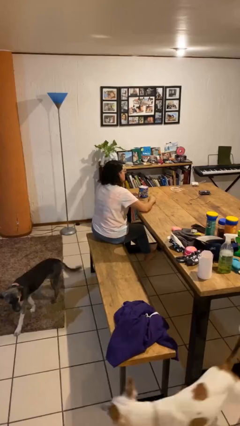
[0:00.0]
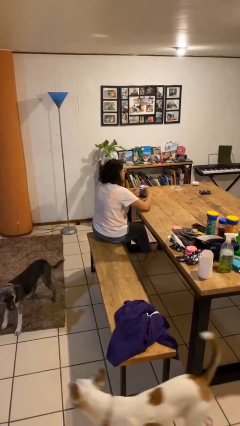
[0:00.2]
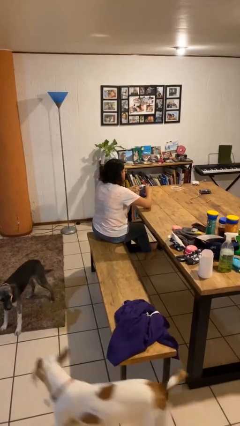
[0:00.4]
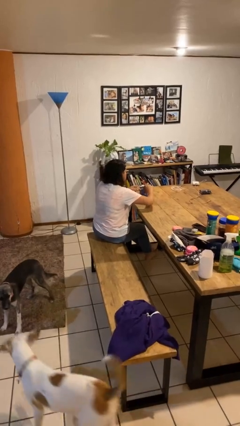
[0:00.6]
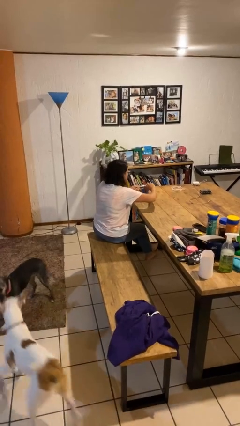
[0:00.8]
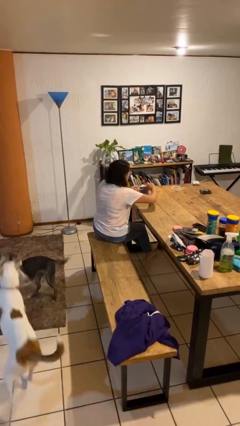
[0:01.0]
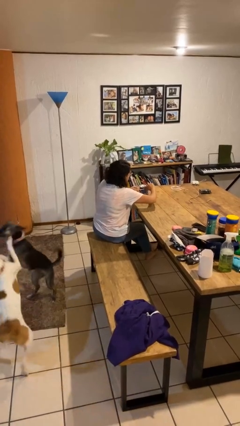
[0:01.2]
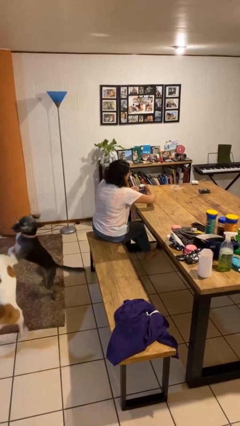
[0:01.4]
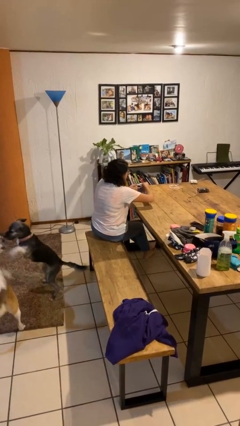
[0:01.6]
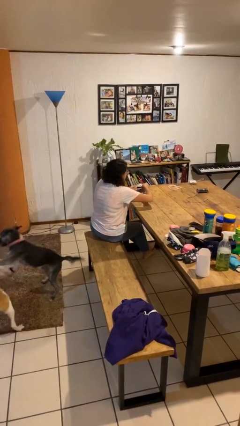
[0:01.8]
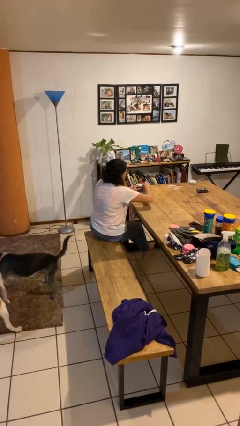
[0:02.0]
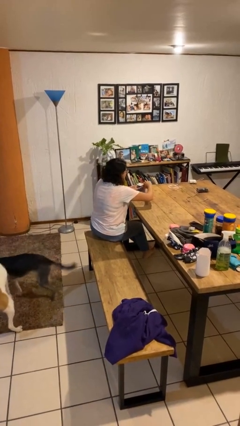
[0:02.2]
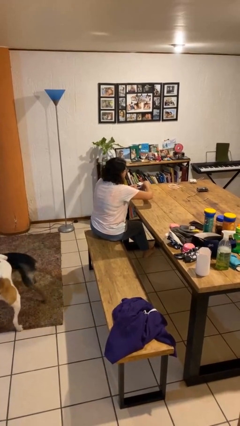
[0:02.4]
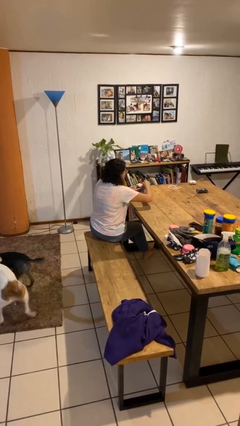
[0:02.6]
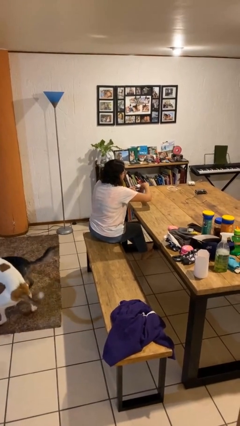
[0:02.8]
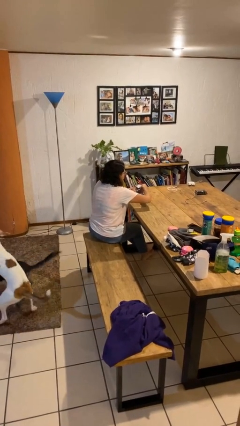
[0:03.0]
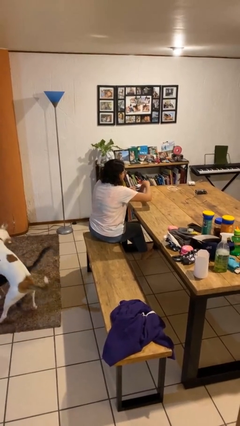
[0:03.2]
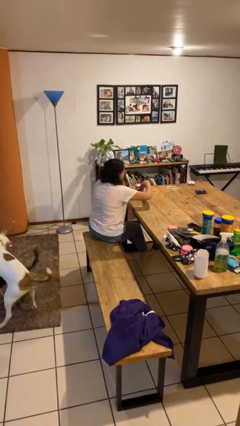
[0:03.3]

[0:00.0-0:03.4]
person opens can with can opener

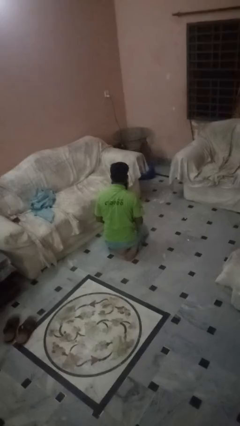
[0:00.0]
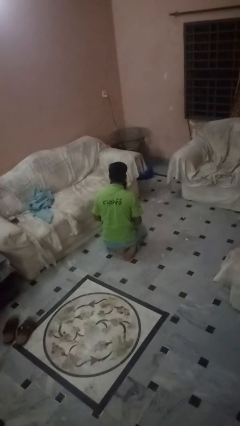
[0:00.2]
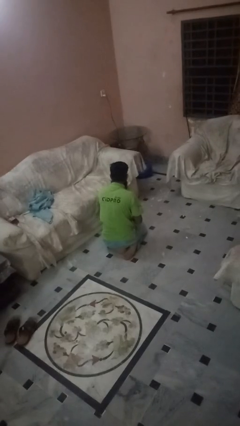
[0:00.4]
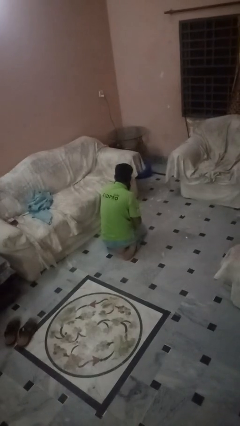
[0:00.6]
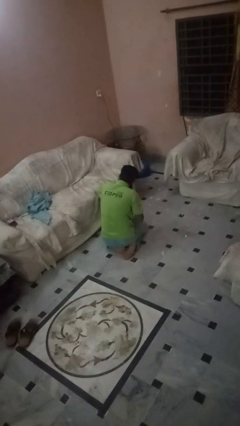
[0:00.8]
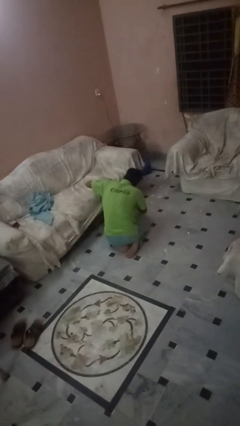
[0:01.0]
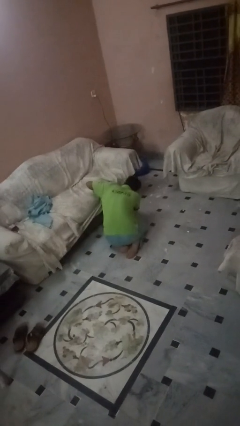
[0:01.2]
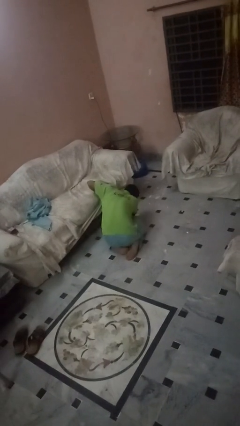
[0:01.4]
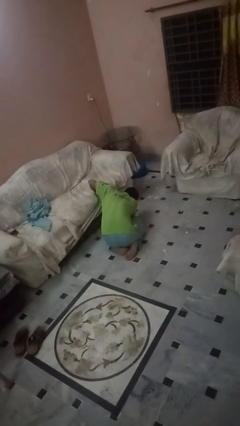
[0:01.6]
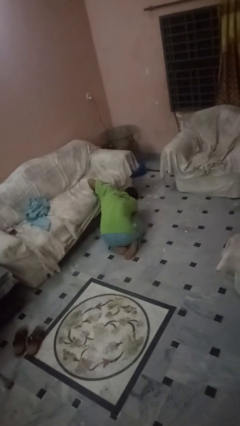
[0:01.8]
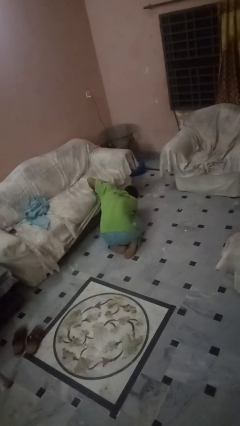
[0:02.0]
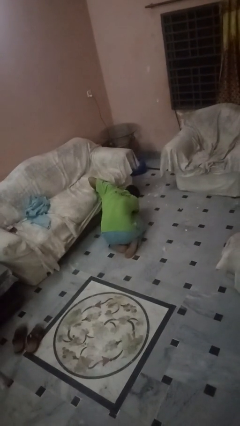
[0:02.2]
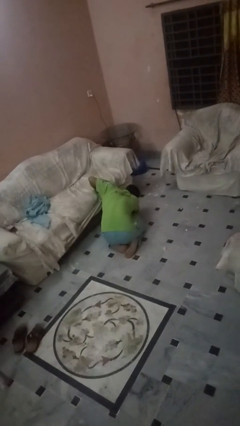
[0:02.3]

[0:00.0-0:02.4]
person searches under couch

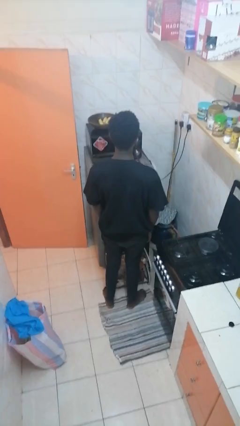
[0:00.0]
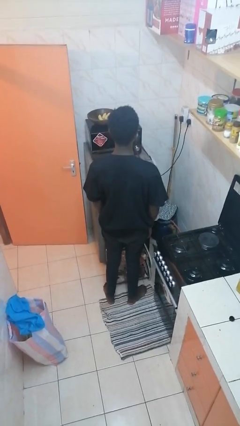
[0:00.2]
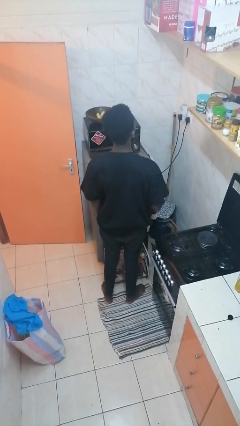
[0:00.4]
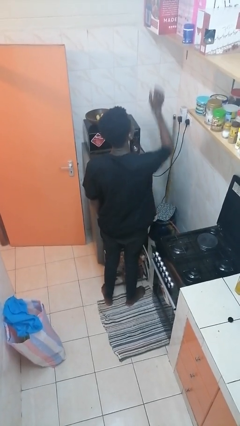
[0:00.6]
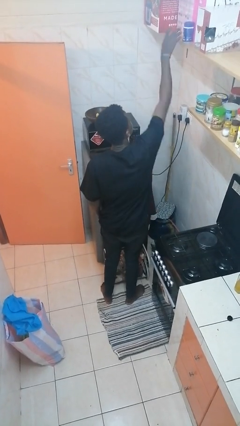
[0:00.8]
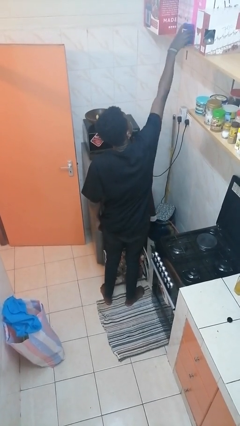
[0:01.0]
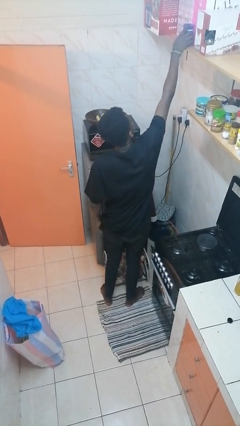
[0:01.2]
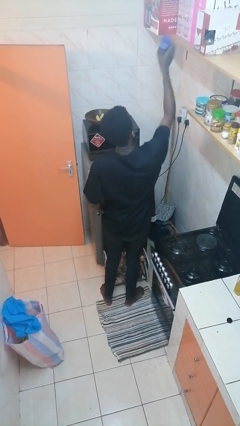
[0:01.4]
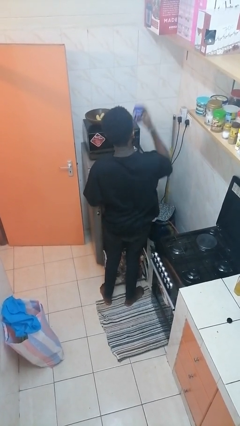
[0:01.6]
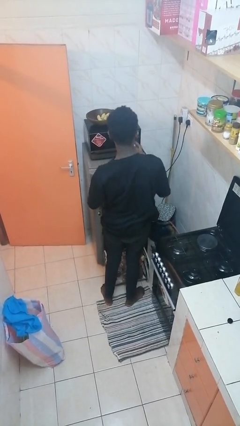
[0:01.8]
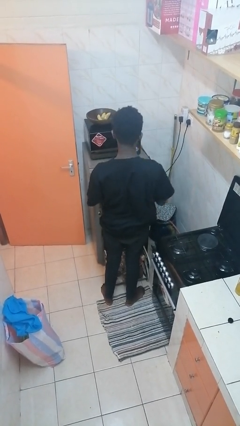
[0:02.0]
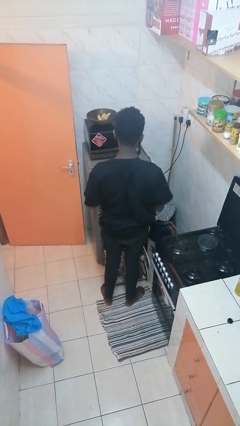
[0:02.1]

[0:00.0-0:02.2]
person picks up object from shelf

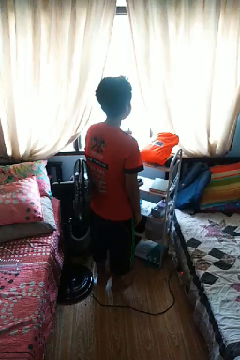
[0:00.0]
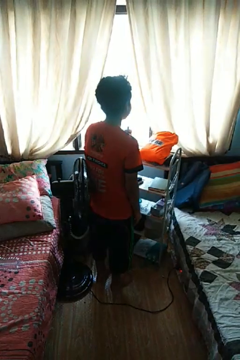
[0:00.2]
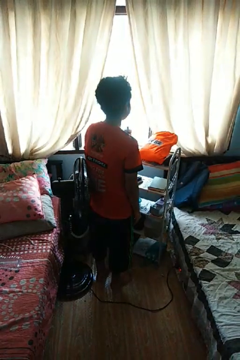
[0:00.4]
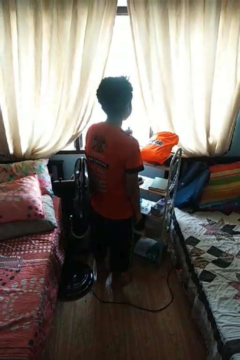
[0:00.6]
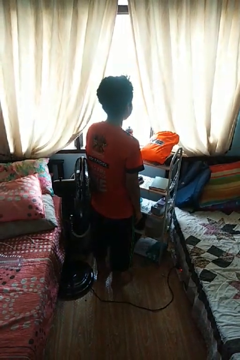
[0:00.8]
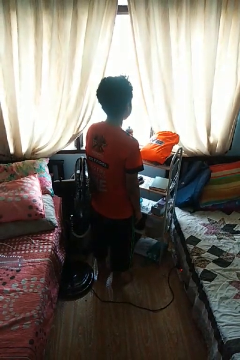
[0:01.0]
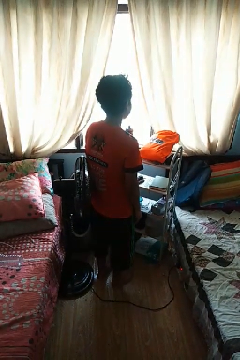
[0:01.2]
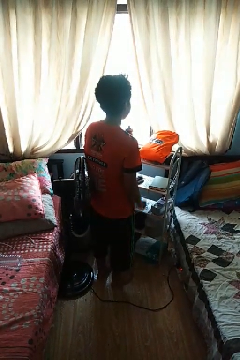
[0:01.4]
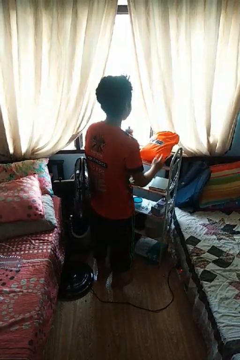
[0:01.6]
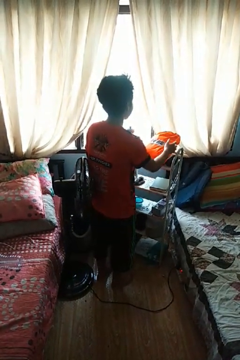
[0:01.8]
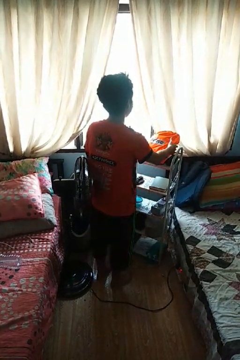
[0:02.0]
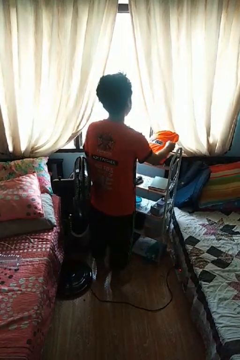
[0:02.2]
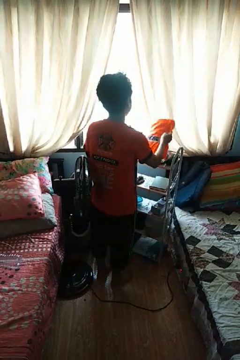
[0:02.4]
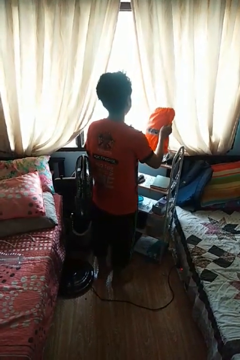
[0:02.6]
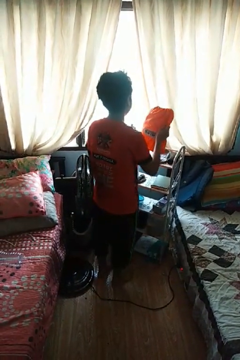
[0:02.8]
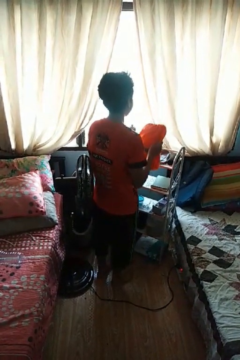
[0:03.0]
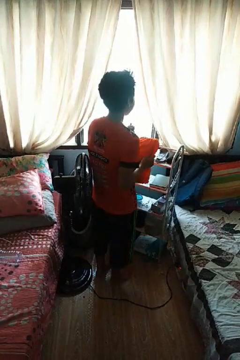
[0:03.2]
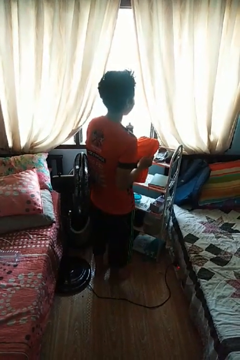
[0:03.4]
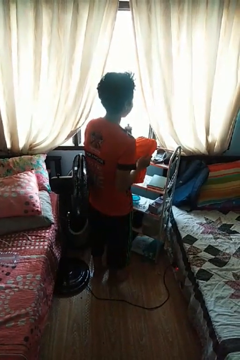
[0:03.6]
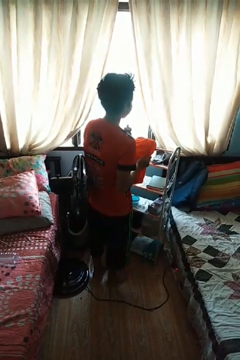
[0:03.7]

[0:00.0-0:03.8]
person picks up object from countertop

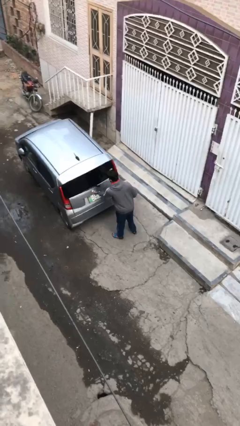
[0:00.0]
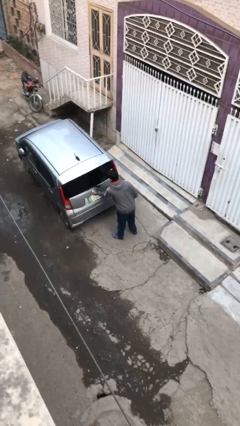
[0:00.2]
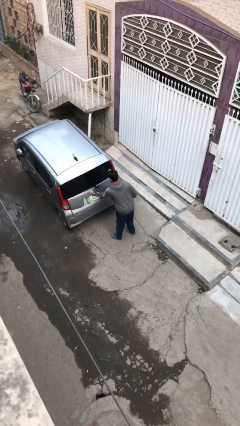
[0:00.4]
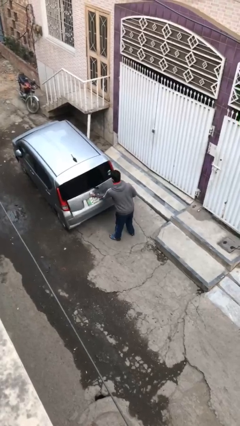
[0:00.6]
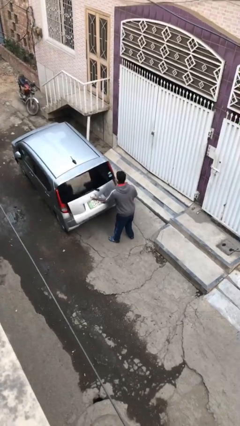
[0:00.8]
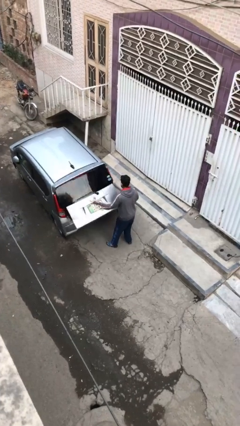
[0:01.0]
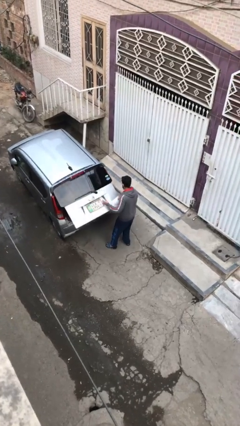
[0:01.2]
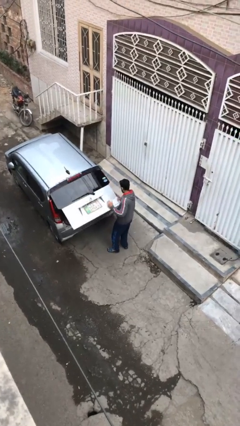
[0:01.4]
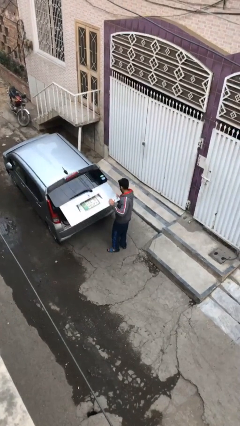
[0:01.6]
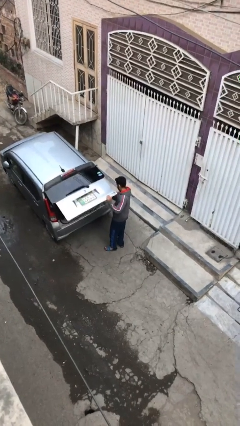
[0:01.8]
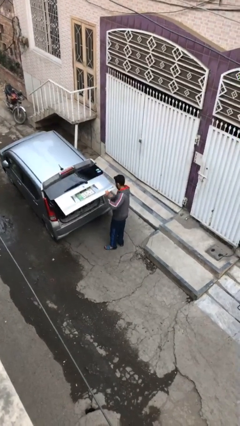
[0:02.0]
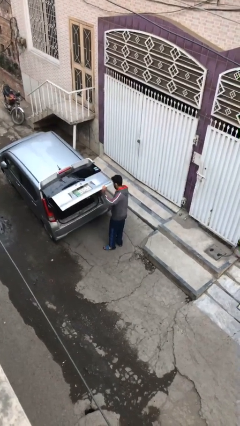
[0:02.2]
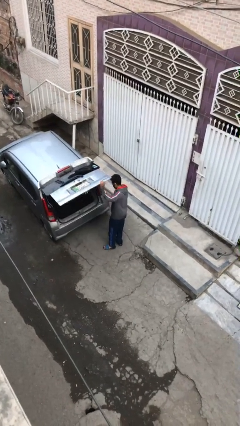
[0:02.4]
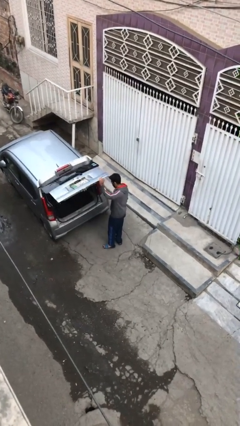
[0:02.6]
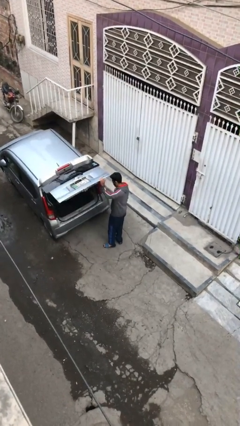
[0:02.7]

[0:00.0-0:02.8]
person opens car trunk

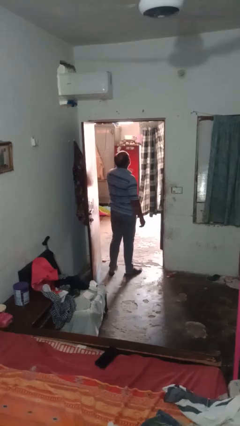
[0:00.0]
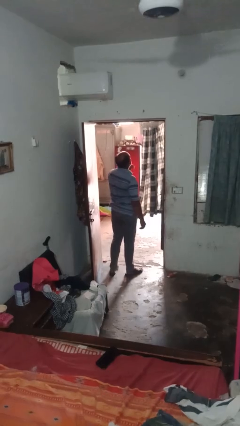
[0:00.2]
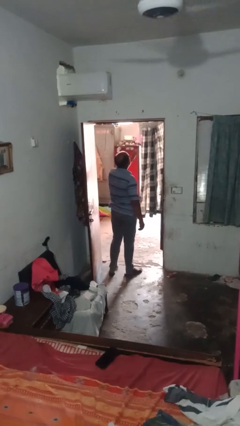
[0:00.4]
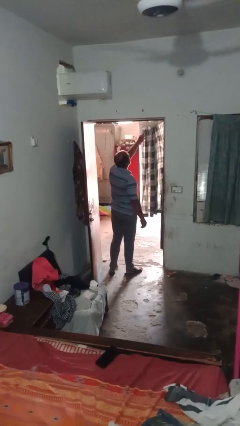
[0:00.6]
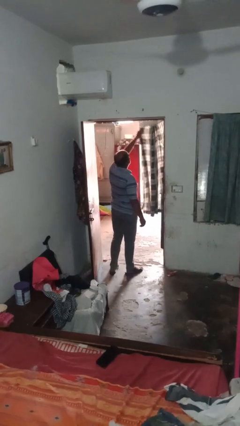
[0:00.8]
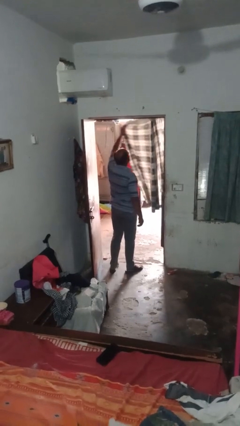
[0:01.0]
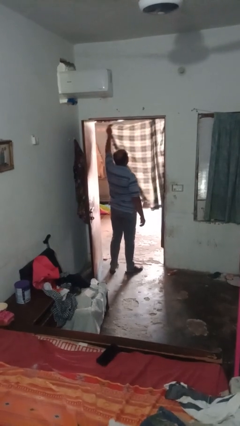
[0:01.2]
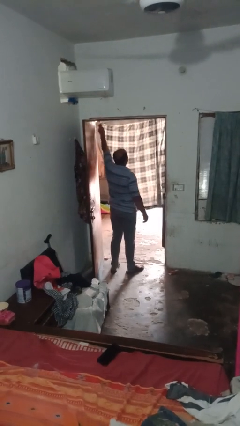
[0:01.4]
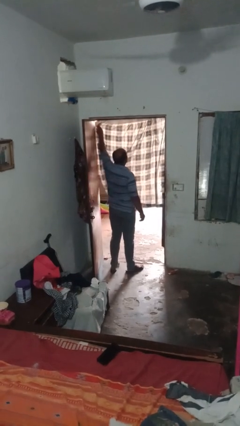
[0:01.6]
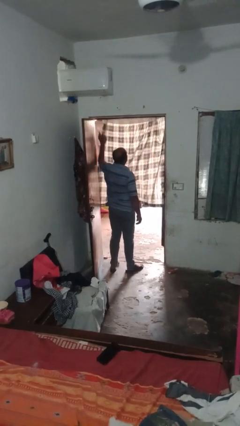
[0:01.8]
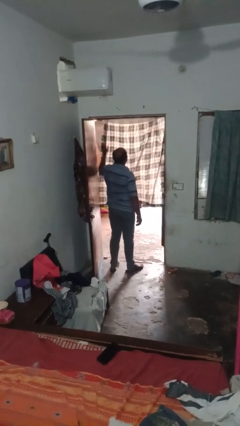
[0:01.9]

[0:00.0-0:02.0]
person closes curtains

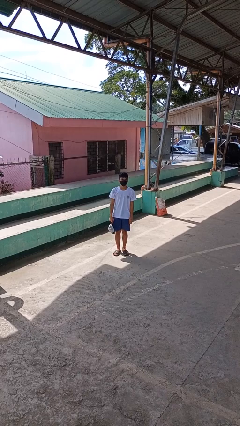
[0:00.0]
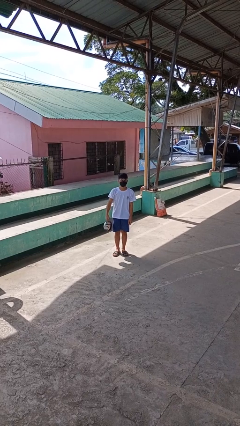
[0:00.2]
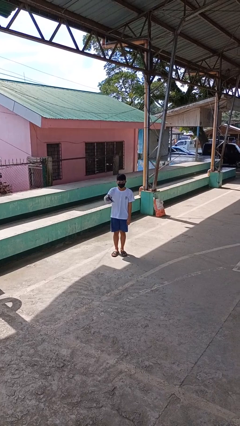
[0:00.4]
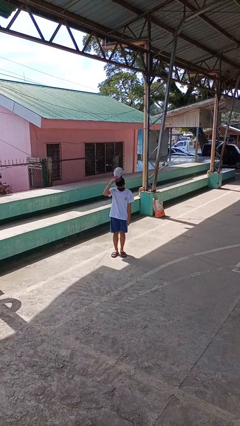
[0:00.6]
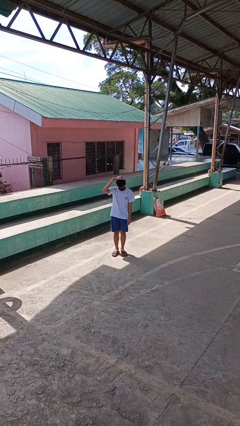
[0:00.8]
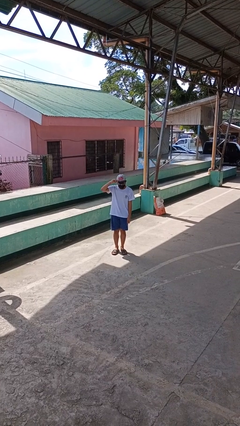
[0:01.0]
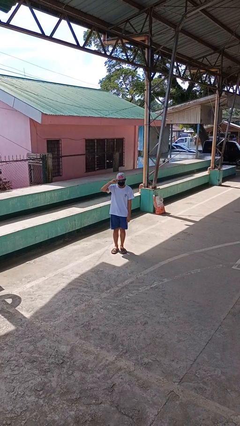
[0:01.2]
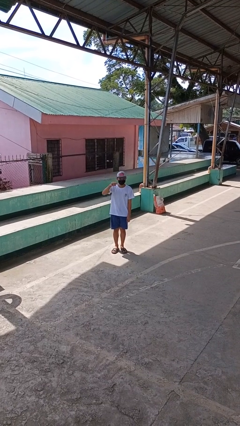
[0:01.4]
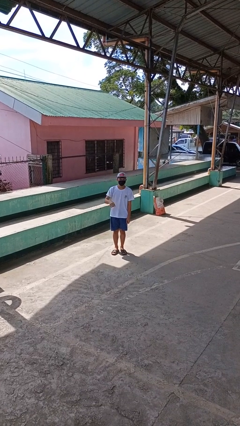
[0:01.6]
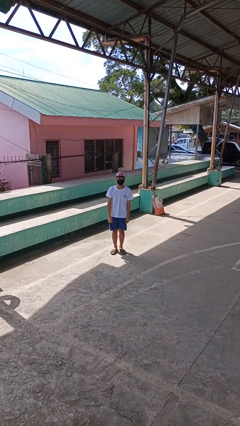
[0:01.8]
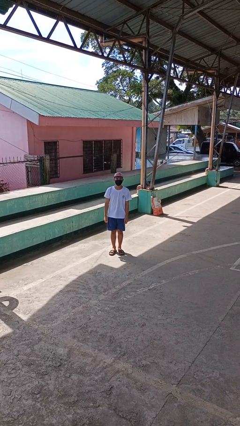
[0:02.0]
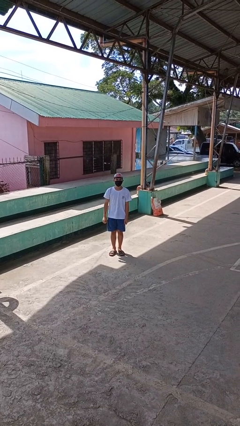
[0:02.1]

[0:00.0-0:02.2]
person puts on hat
